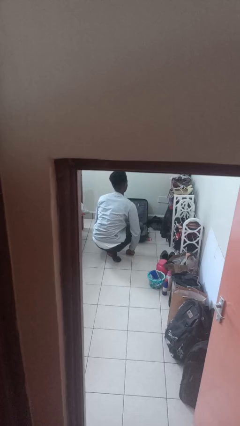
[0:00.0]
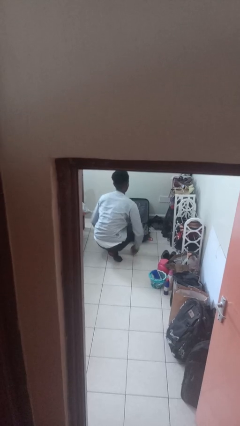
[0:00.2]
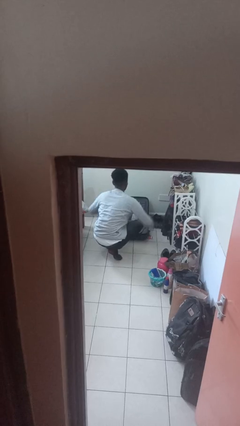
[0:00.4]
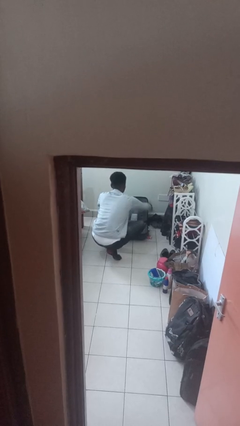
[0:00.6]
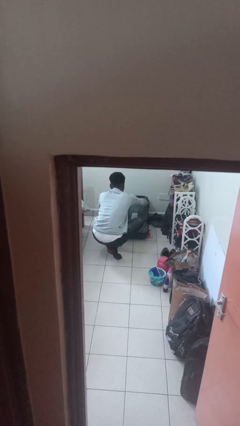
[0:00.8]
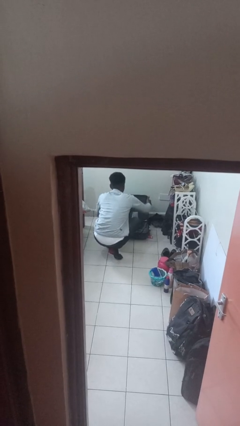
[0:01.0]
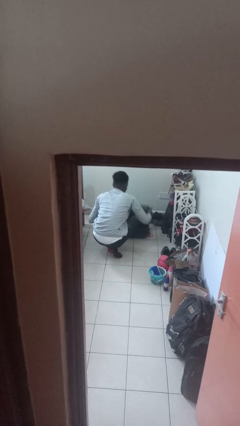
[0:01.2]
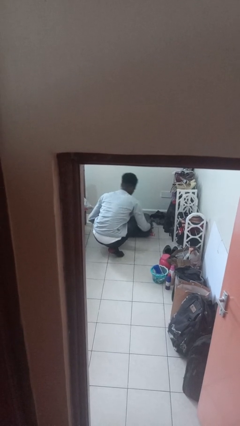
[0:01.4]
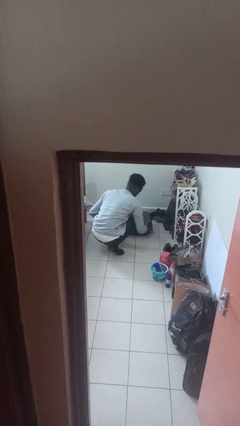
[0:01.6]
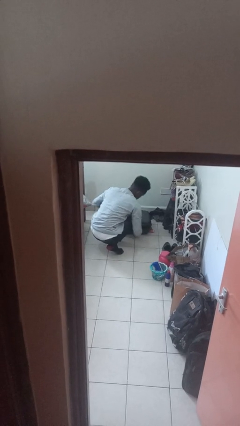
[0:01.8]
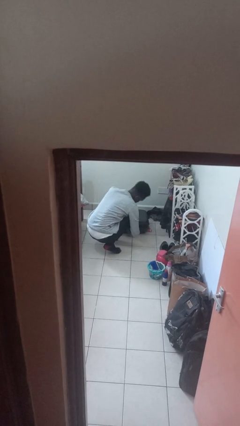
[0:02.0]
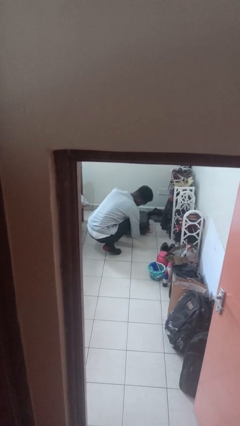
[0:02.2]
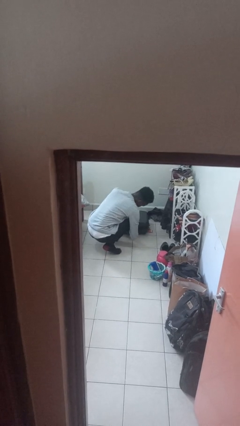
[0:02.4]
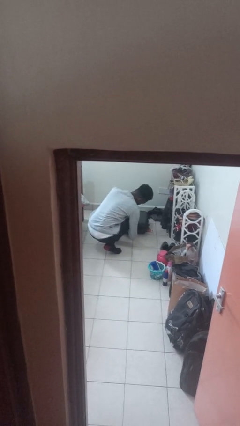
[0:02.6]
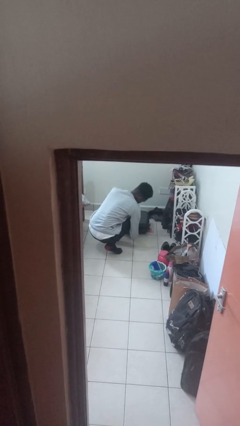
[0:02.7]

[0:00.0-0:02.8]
person closes suitcase

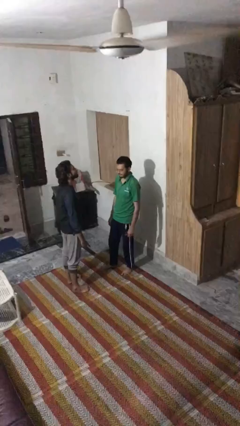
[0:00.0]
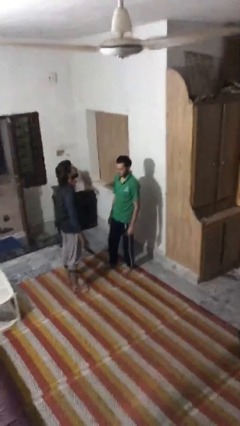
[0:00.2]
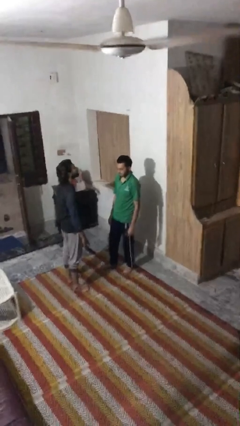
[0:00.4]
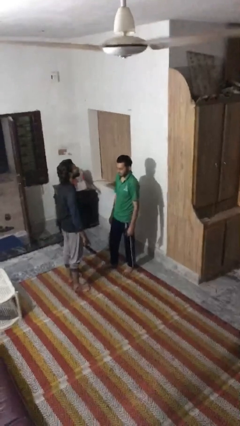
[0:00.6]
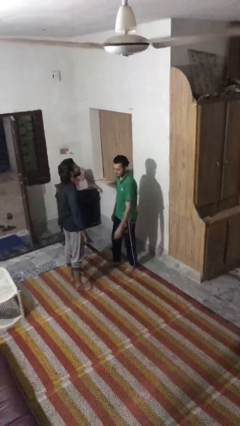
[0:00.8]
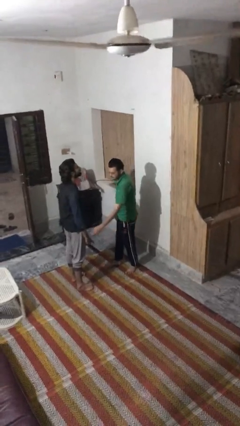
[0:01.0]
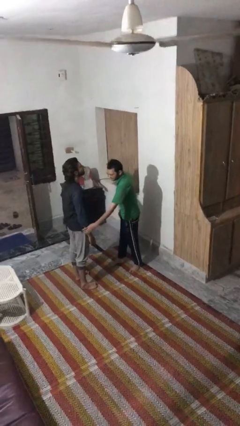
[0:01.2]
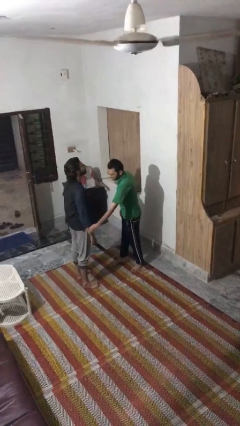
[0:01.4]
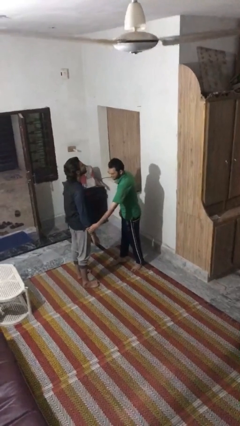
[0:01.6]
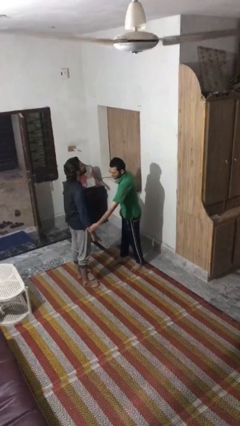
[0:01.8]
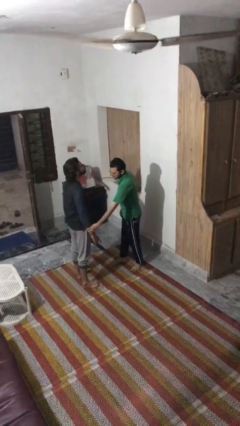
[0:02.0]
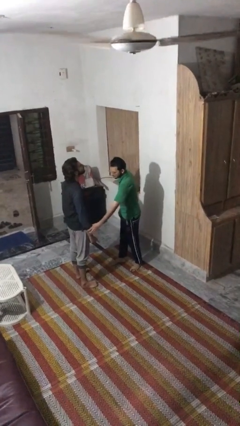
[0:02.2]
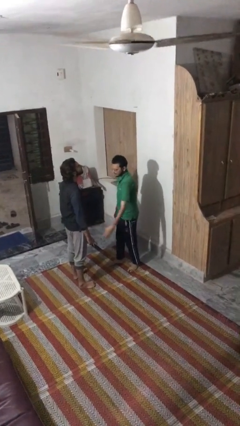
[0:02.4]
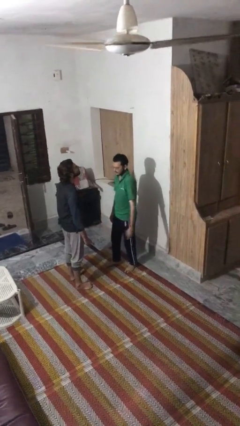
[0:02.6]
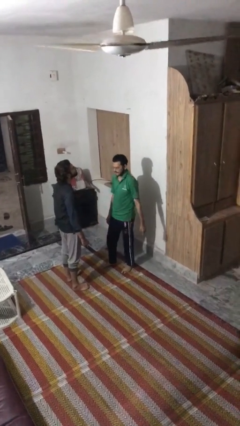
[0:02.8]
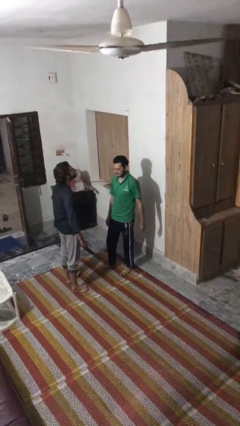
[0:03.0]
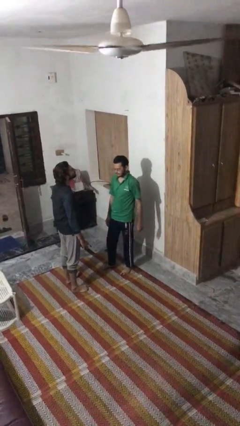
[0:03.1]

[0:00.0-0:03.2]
person grabs person by forearm

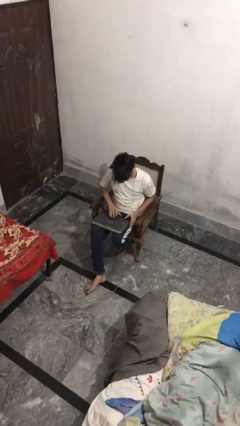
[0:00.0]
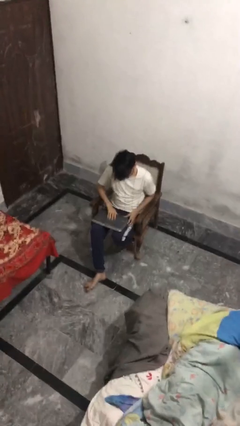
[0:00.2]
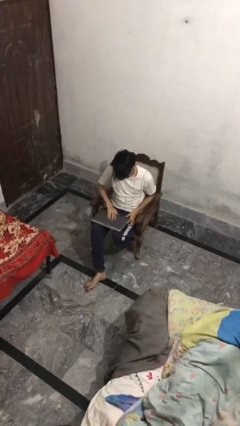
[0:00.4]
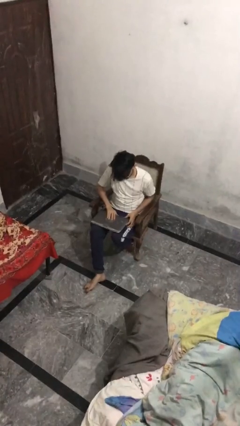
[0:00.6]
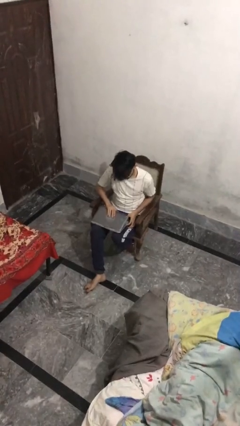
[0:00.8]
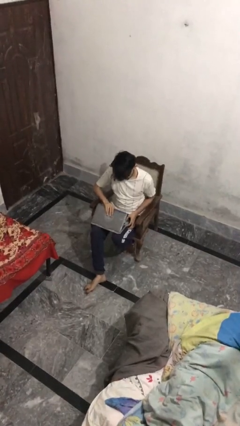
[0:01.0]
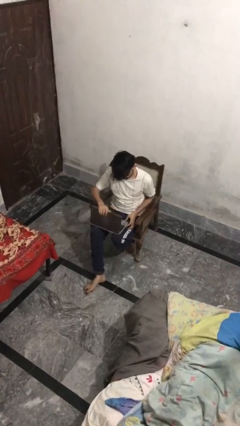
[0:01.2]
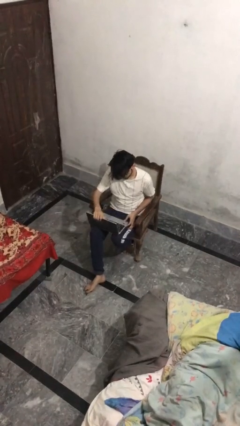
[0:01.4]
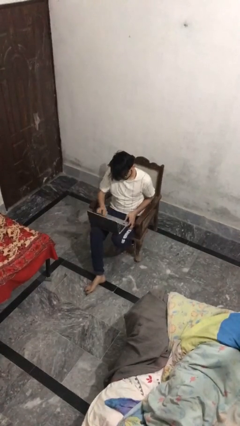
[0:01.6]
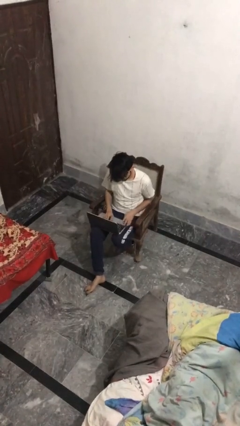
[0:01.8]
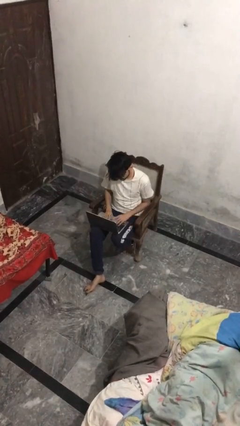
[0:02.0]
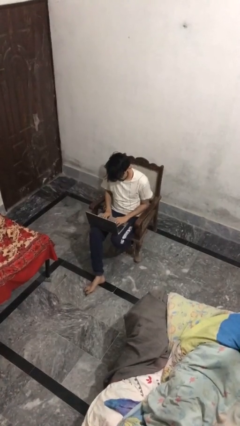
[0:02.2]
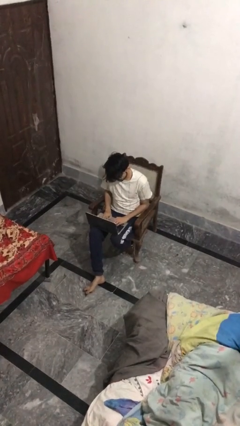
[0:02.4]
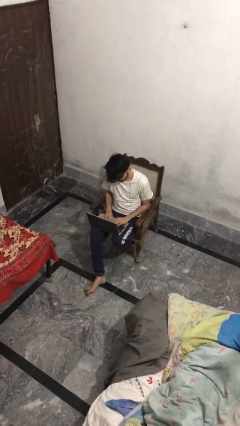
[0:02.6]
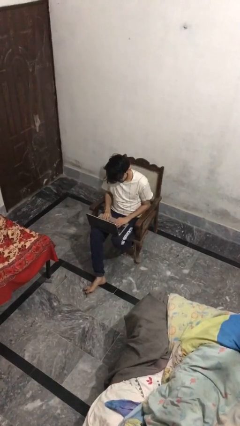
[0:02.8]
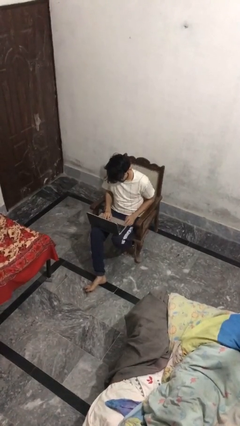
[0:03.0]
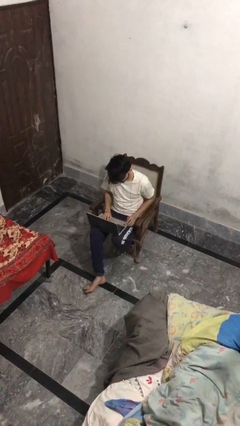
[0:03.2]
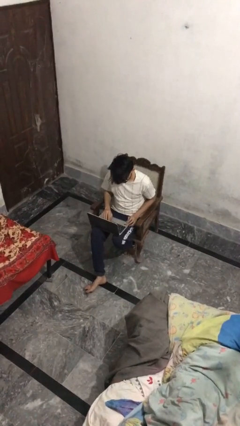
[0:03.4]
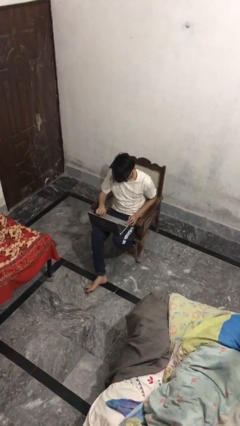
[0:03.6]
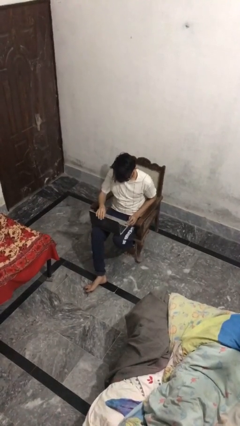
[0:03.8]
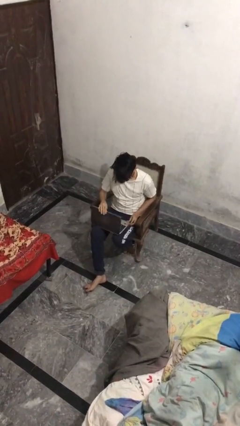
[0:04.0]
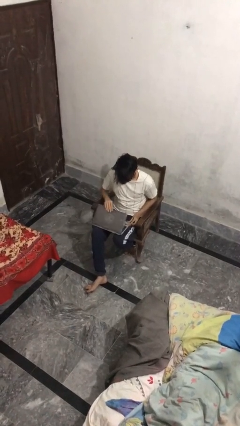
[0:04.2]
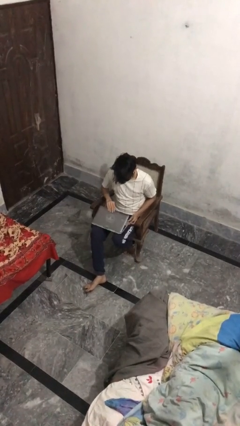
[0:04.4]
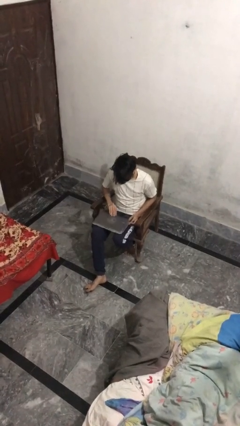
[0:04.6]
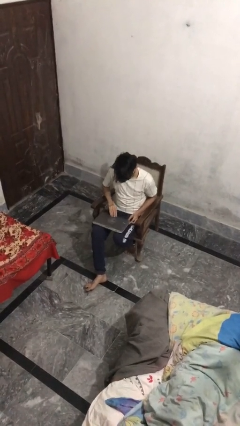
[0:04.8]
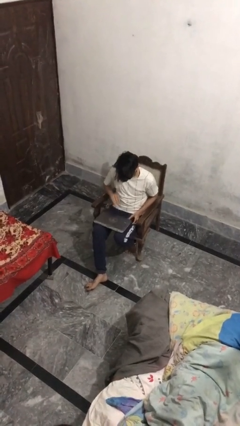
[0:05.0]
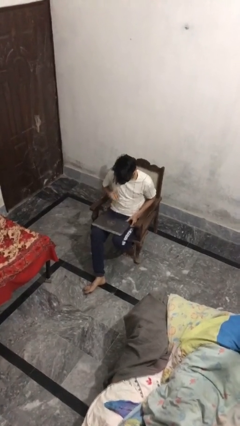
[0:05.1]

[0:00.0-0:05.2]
person interacts with laptop

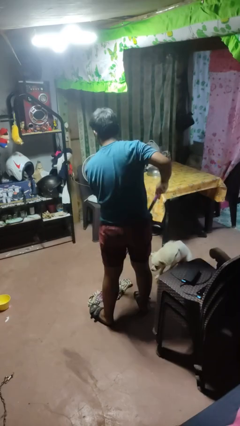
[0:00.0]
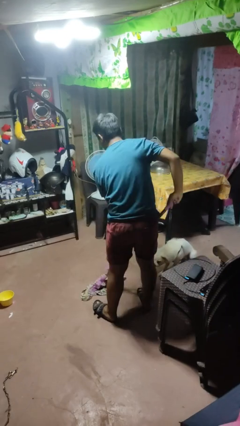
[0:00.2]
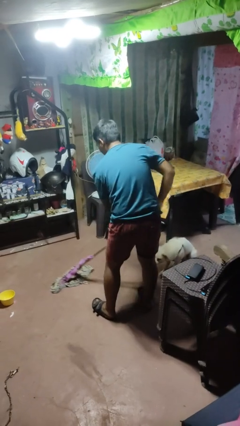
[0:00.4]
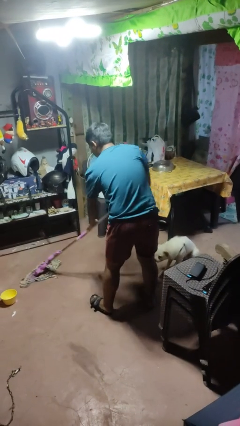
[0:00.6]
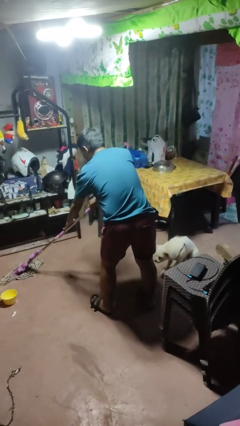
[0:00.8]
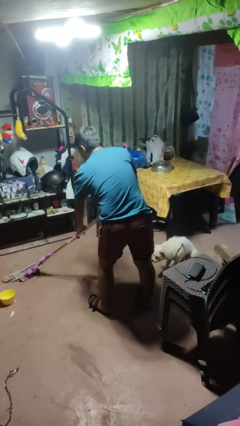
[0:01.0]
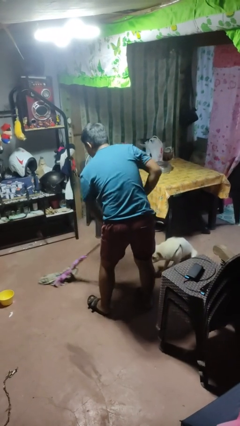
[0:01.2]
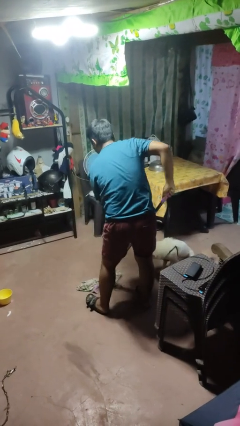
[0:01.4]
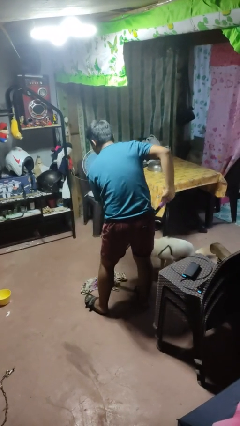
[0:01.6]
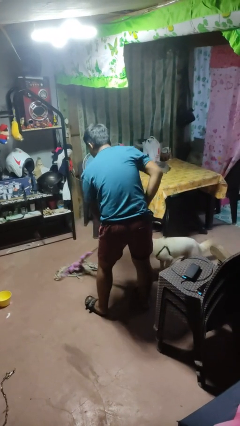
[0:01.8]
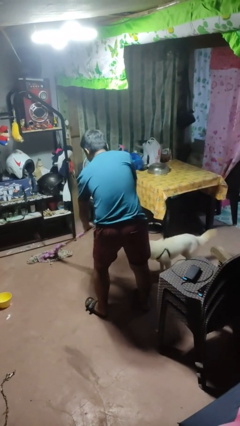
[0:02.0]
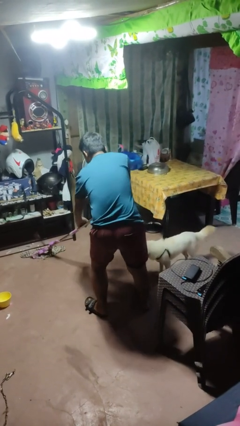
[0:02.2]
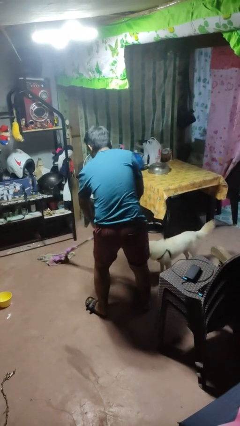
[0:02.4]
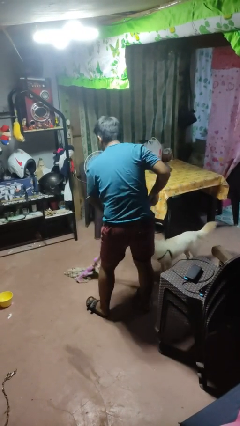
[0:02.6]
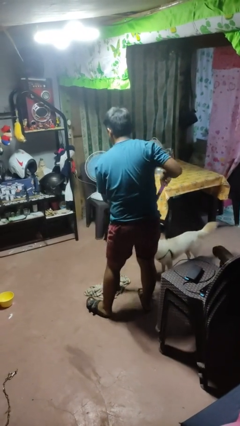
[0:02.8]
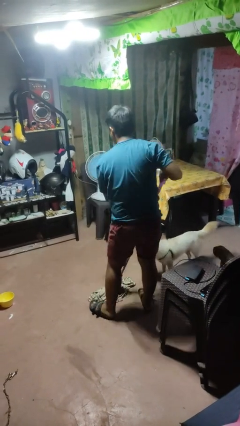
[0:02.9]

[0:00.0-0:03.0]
person mops

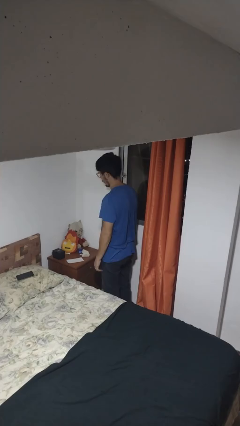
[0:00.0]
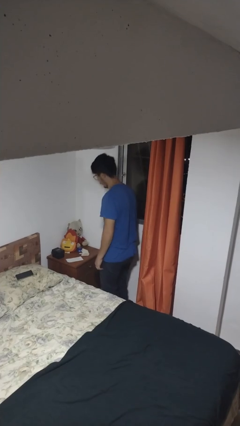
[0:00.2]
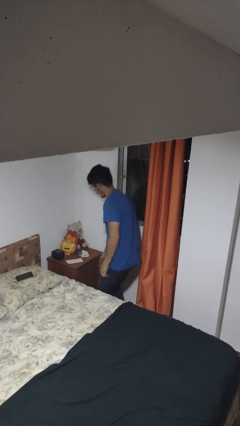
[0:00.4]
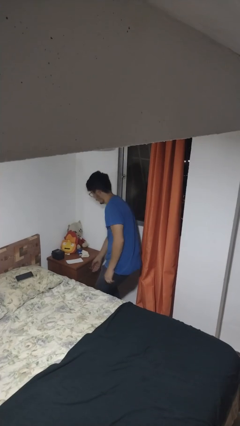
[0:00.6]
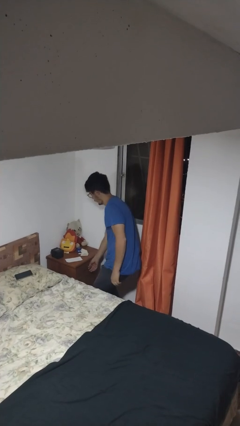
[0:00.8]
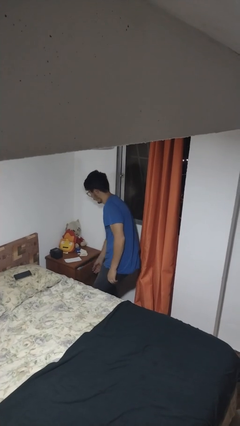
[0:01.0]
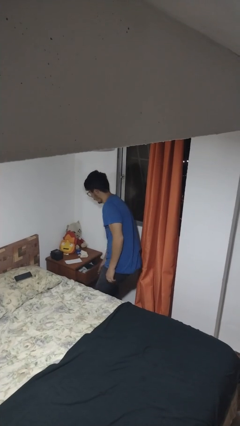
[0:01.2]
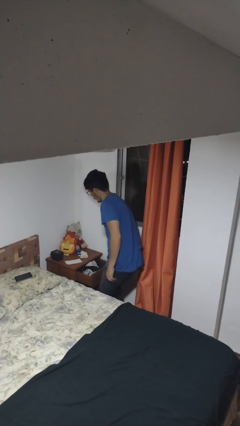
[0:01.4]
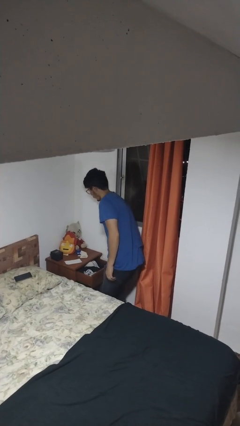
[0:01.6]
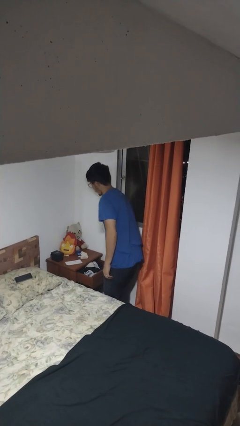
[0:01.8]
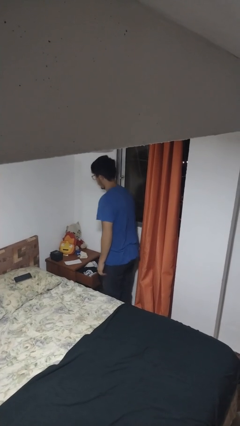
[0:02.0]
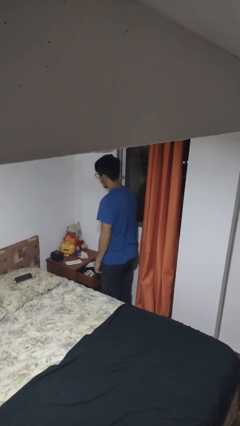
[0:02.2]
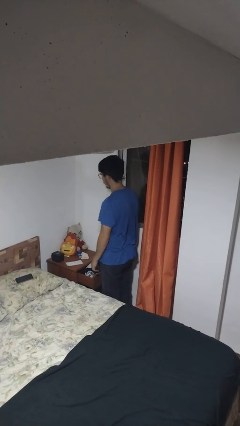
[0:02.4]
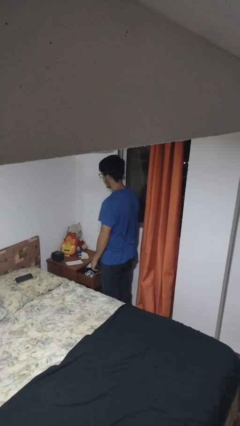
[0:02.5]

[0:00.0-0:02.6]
person opens dresser drawer

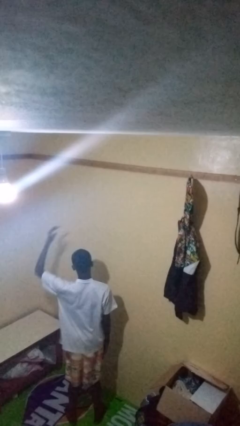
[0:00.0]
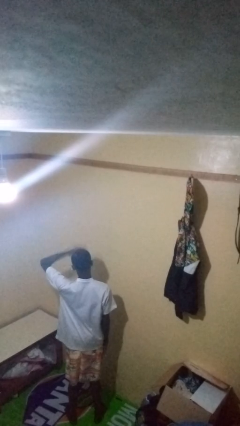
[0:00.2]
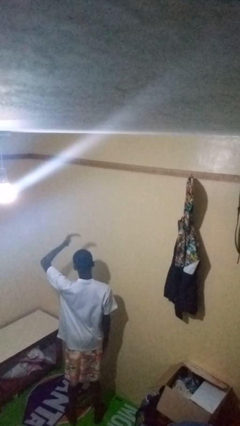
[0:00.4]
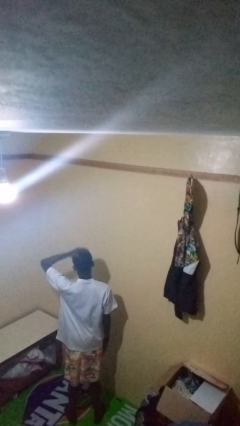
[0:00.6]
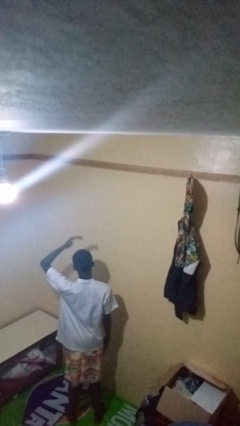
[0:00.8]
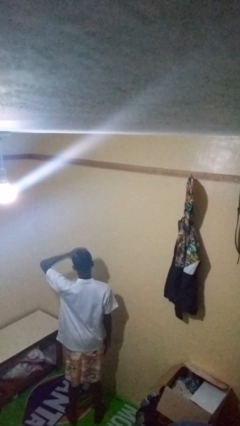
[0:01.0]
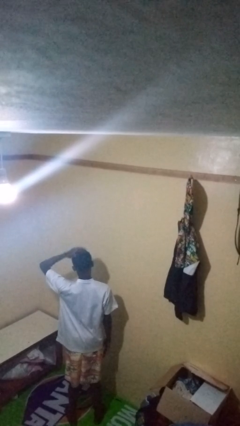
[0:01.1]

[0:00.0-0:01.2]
person pats head
